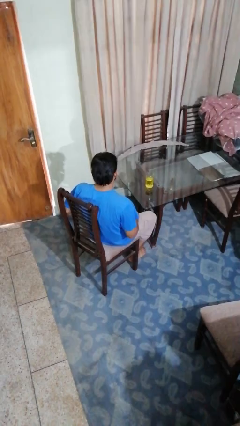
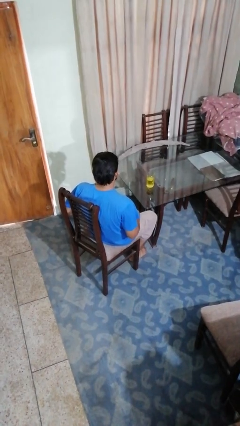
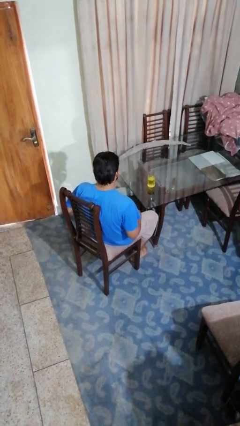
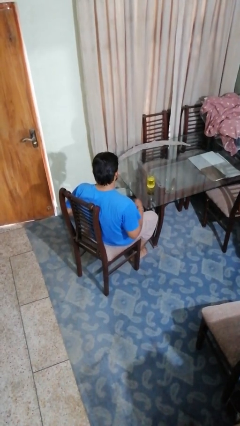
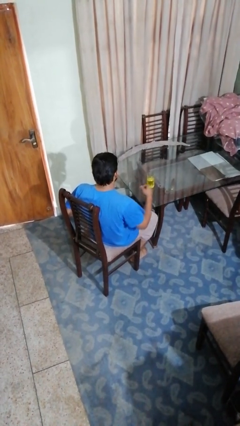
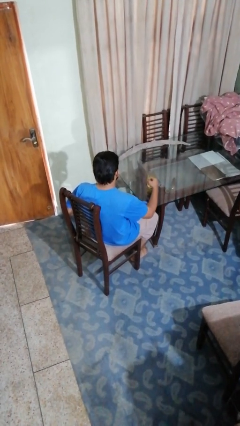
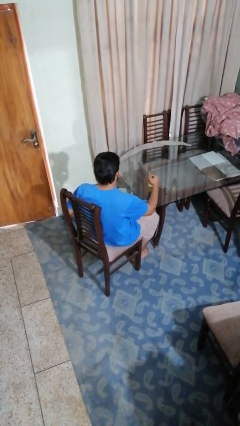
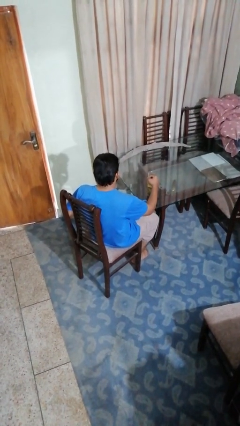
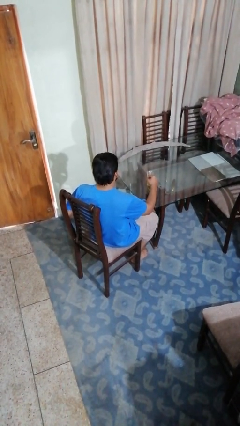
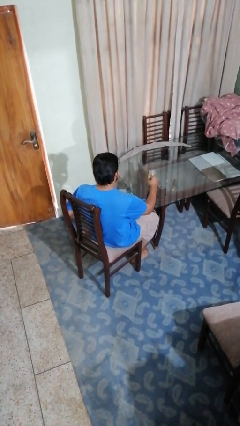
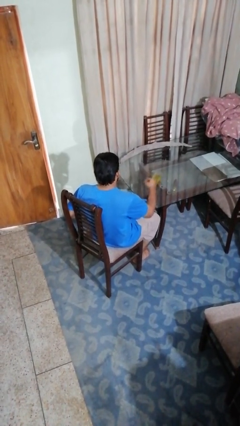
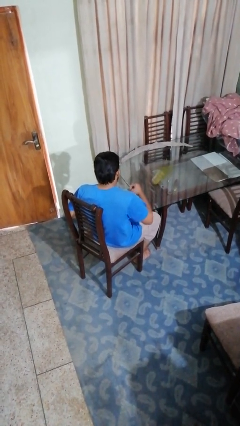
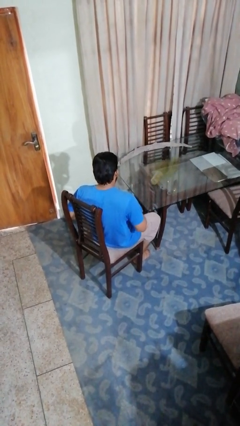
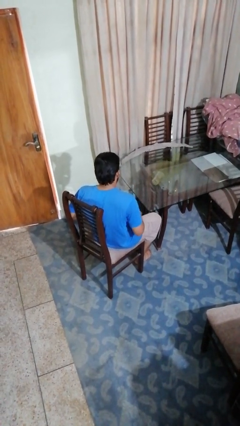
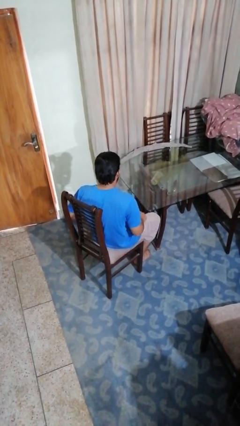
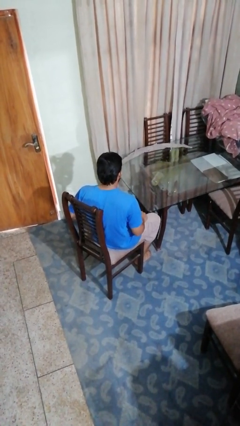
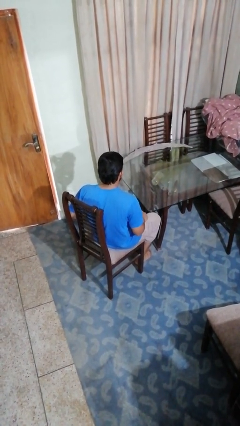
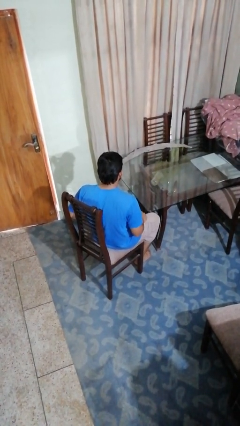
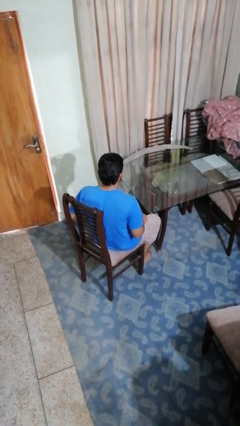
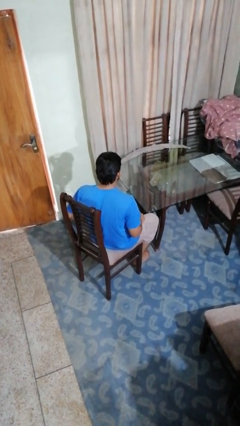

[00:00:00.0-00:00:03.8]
person spills on table

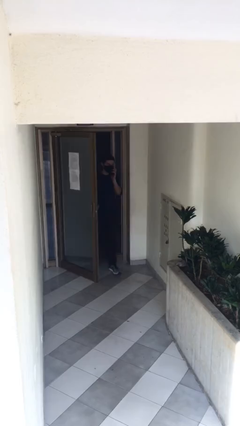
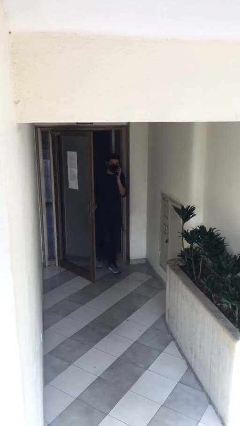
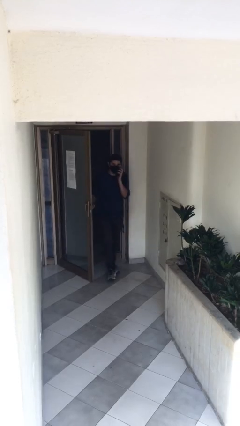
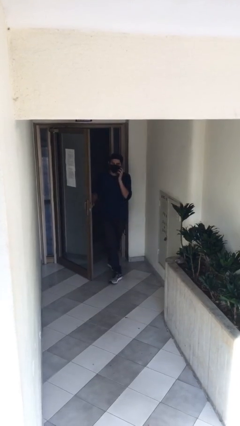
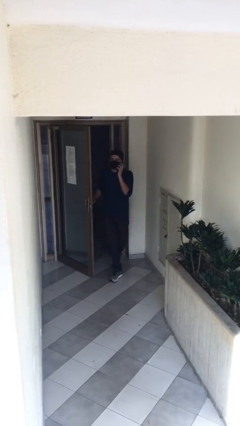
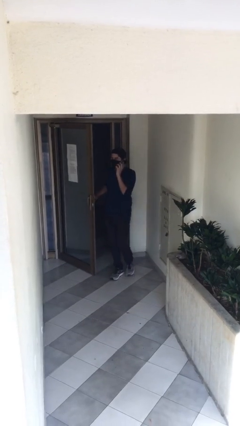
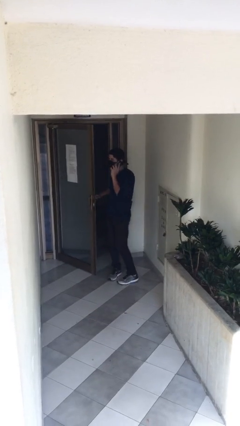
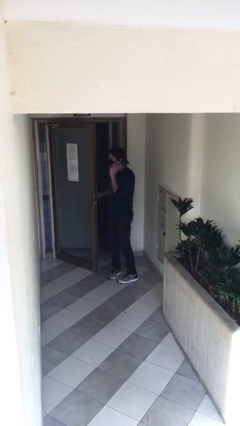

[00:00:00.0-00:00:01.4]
person enters scene through structure

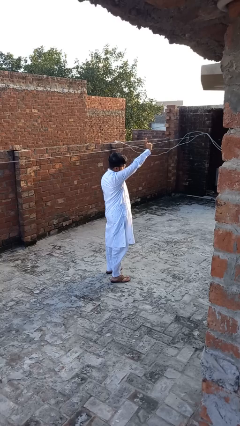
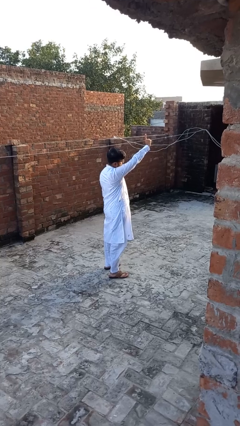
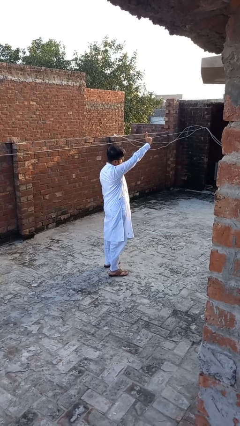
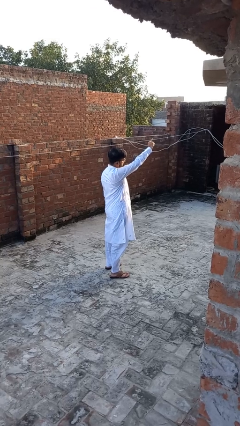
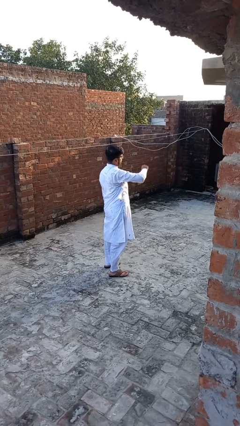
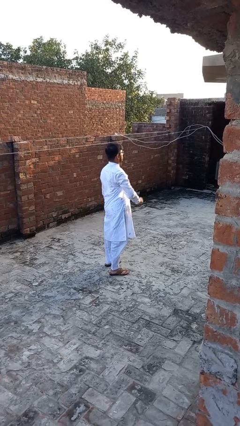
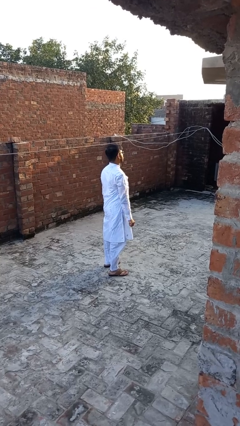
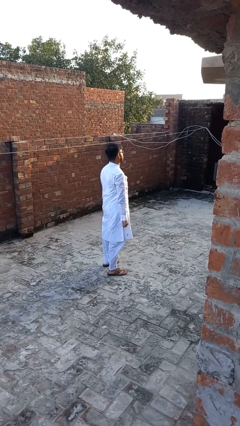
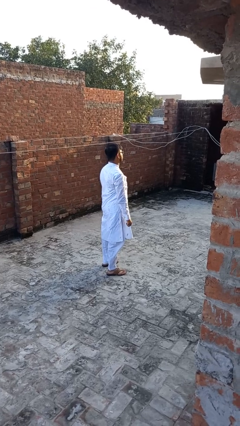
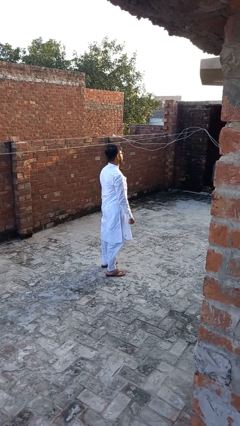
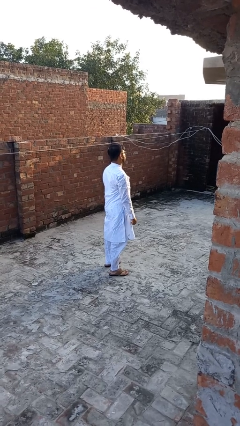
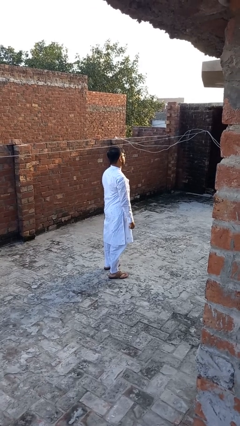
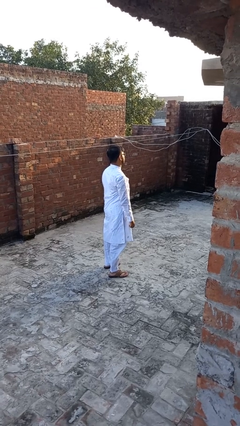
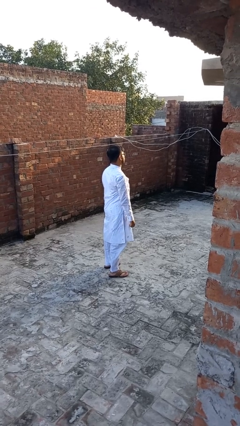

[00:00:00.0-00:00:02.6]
person gestures lower hand

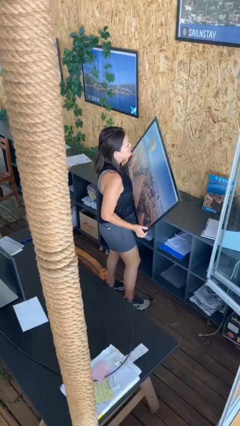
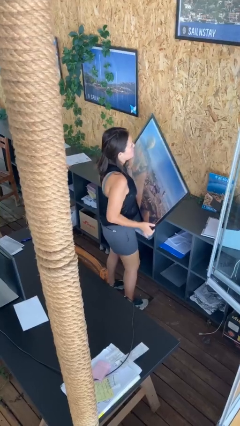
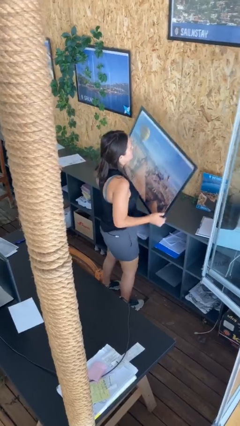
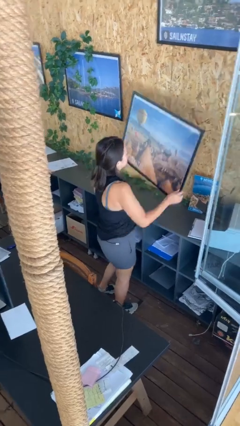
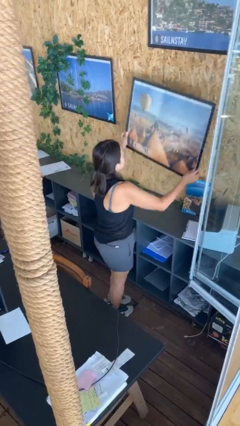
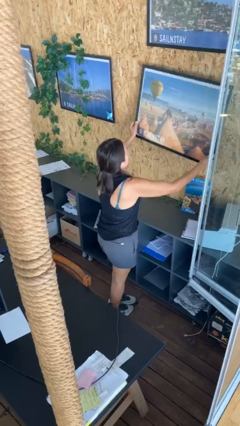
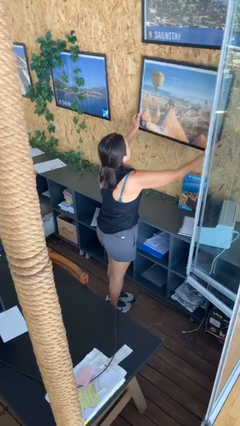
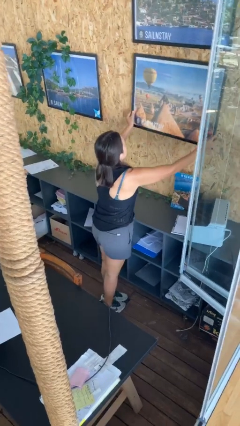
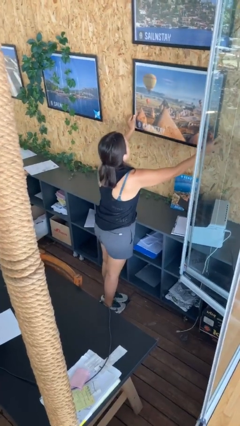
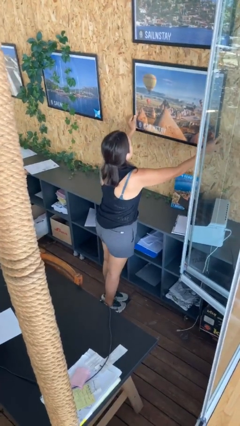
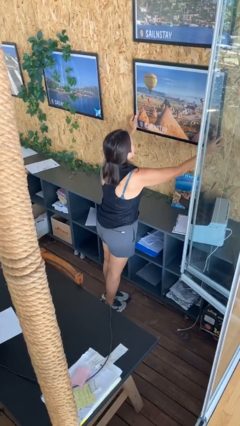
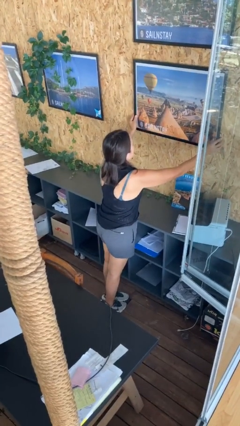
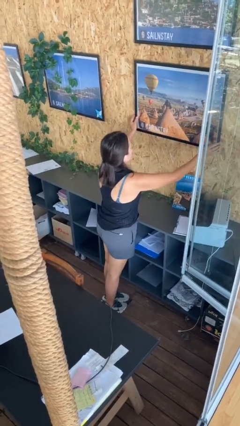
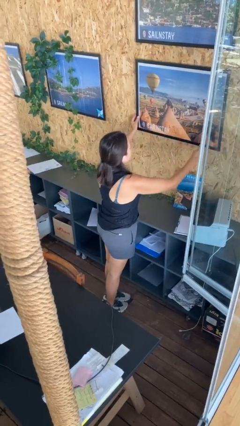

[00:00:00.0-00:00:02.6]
person puts up picture frame

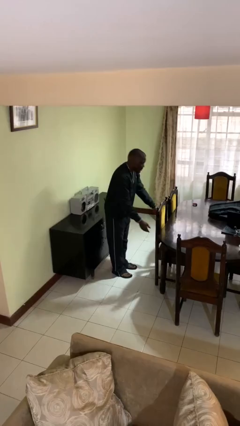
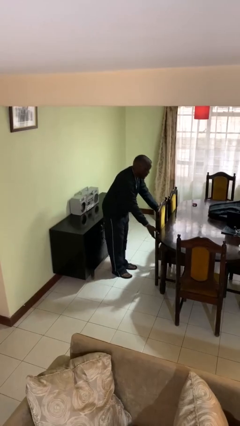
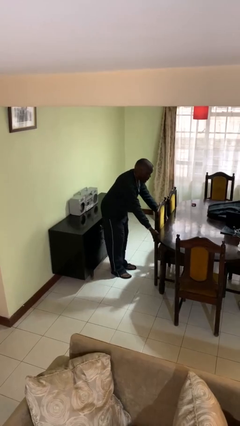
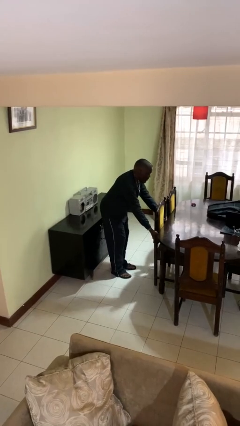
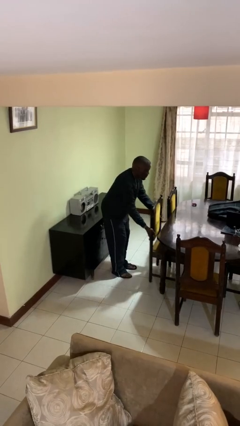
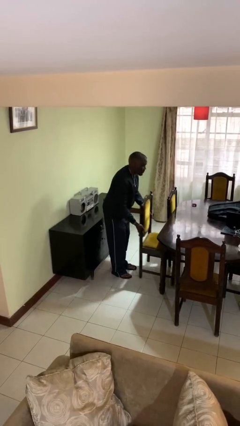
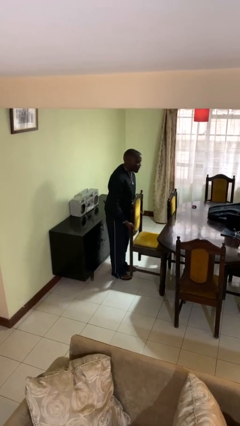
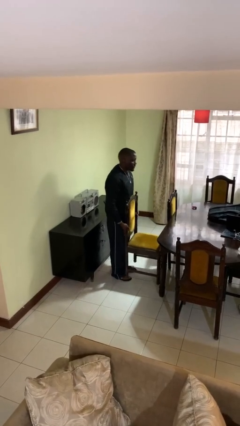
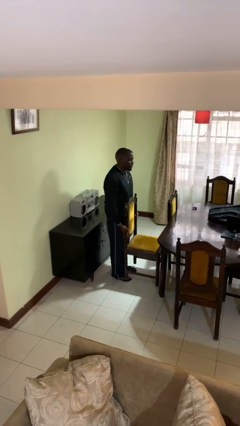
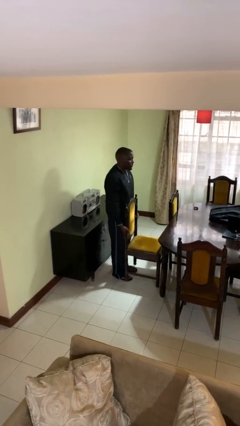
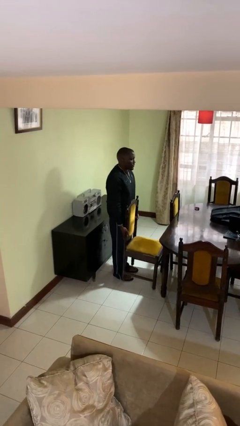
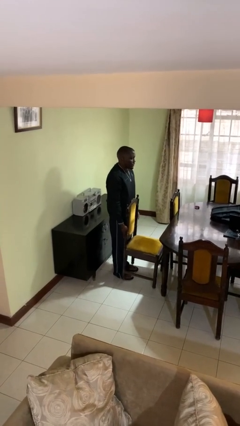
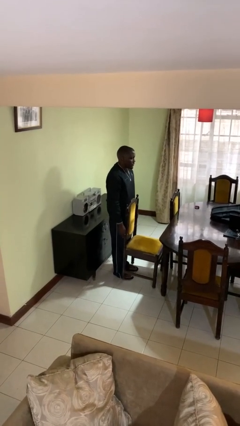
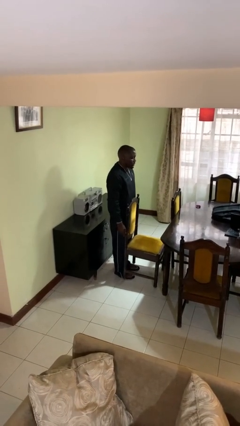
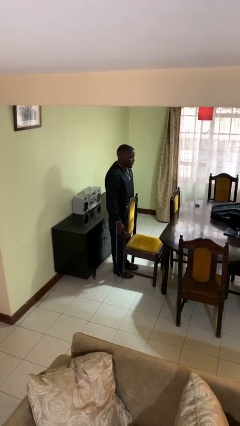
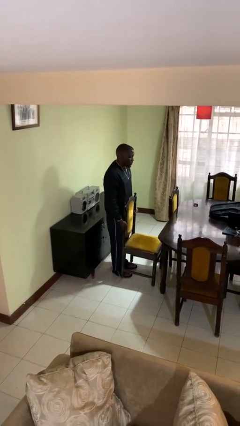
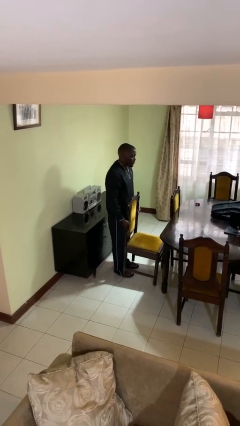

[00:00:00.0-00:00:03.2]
person pulls out chair

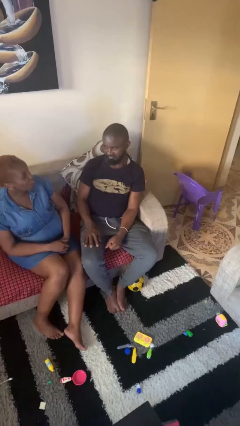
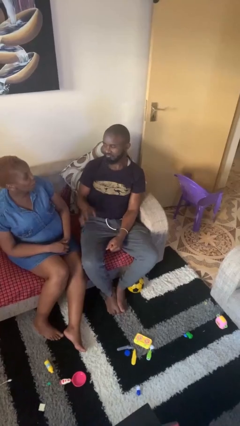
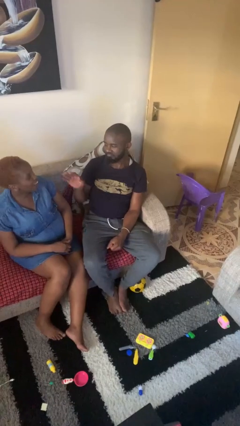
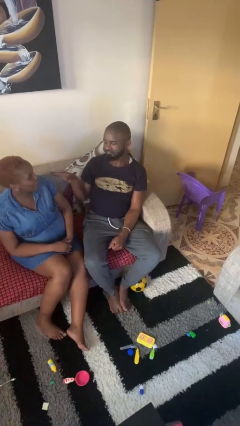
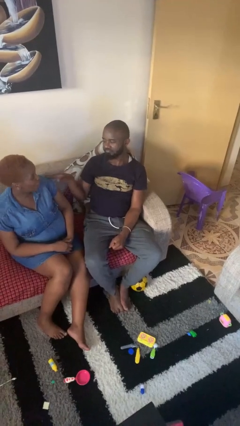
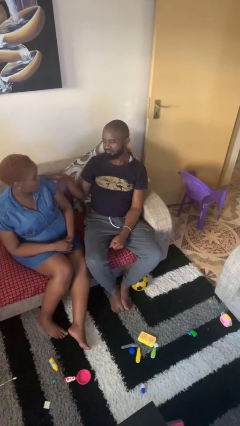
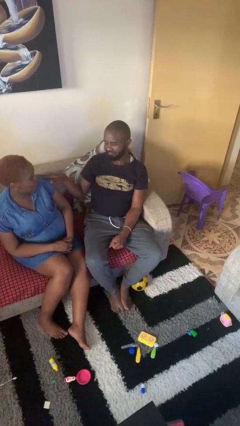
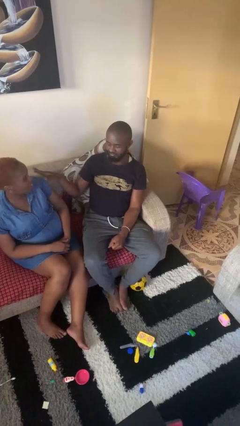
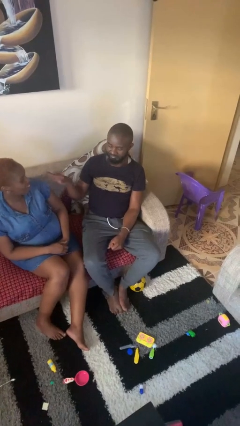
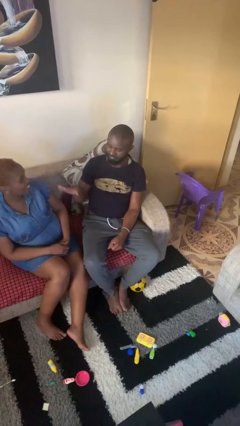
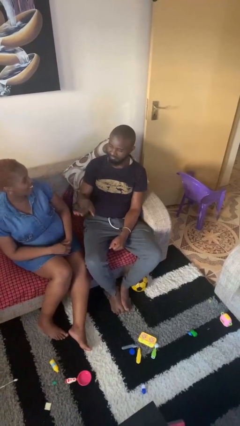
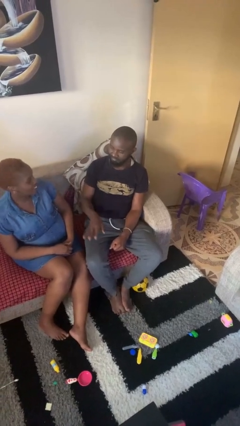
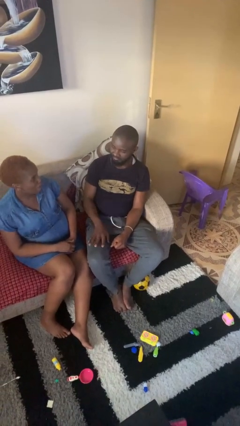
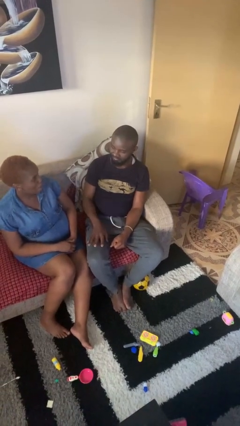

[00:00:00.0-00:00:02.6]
person shoves person

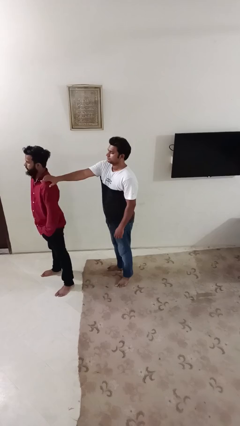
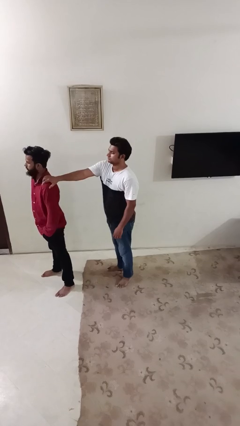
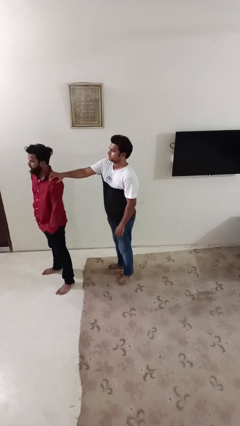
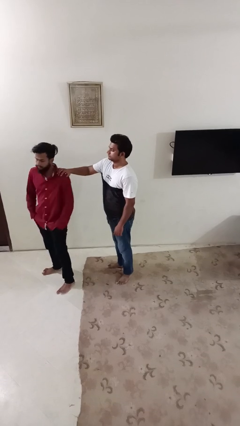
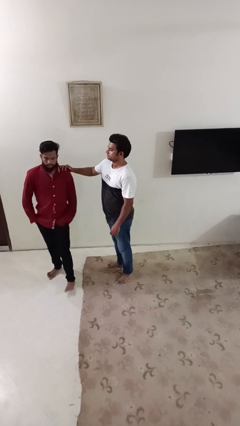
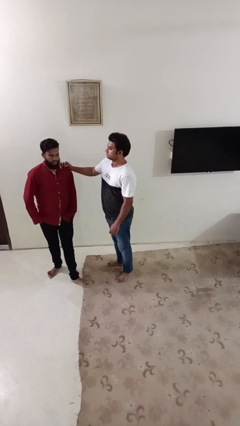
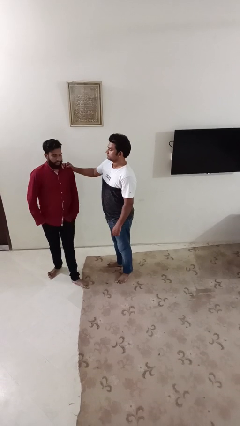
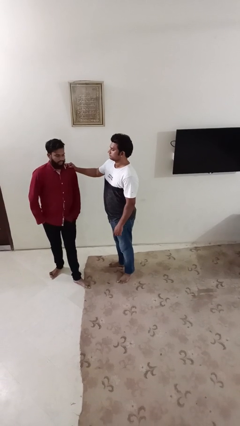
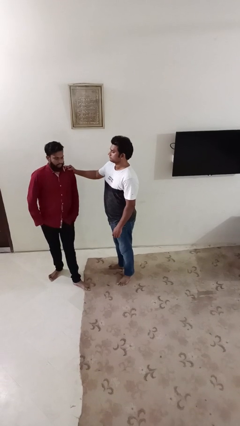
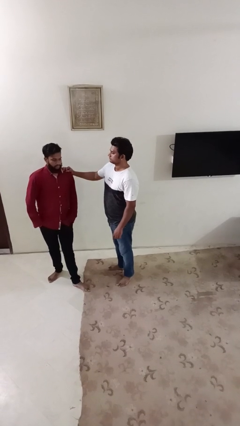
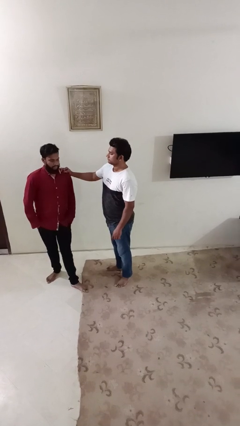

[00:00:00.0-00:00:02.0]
person spins person around
